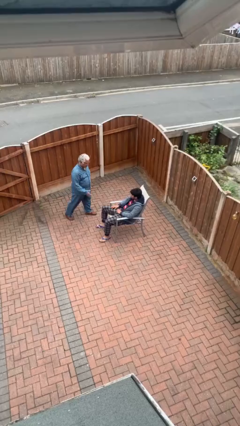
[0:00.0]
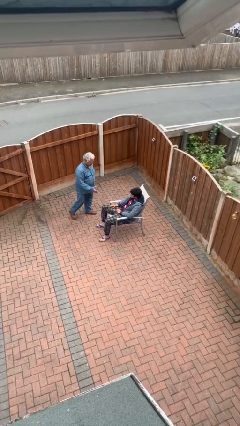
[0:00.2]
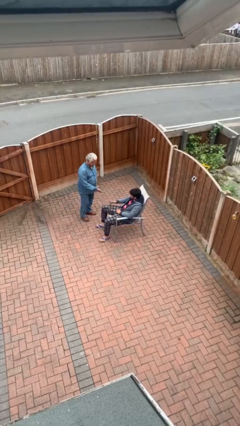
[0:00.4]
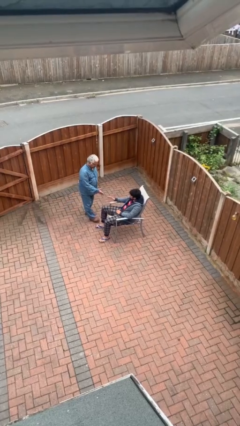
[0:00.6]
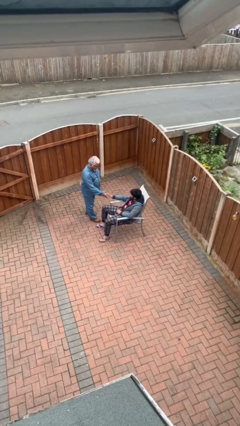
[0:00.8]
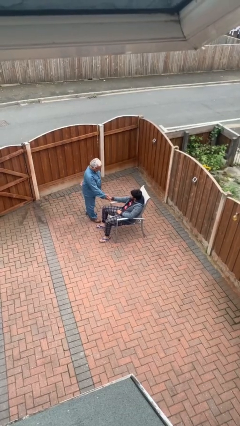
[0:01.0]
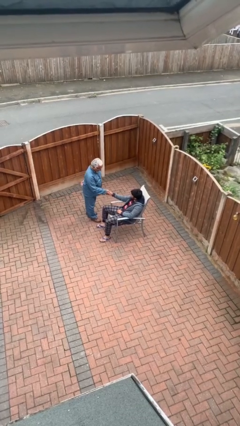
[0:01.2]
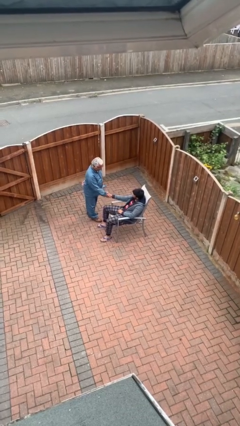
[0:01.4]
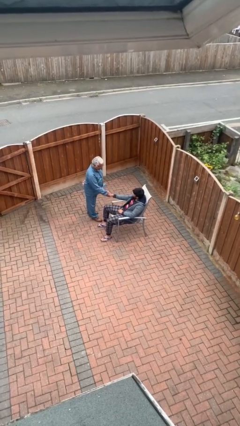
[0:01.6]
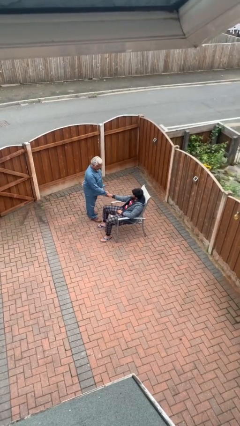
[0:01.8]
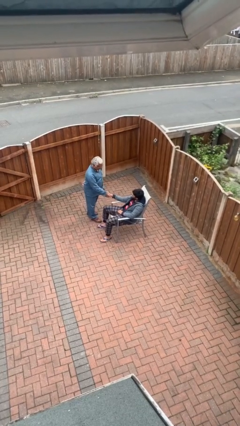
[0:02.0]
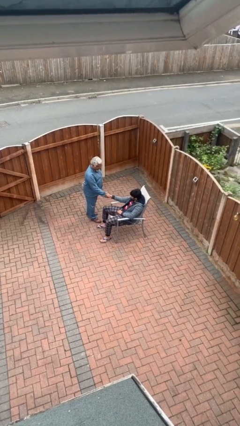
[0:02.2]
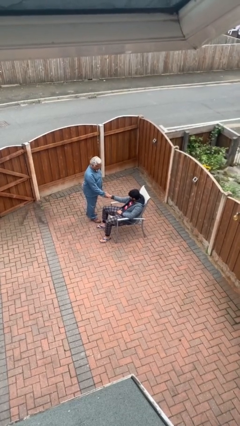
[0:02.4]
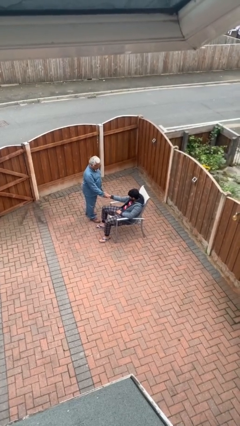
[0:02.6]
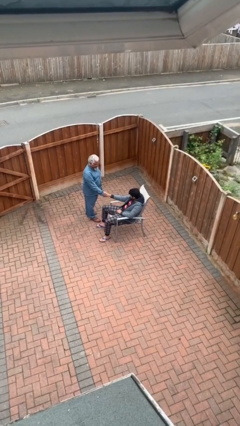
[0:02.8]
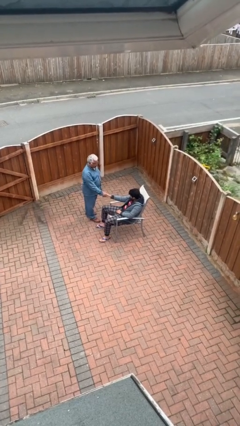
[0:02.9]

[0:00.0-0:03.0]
person shakes hand

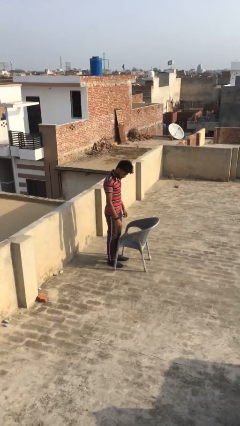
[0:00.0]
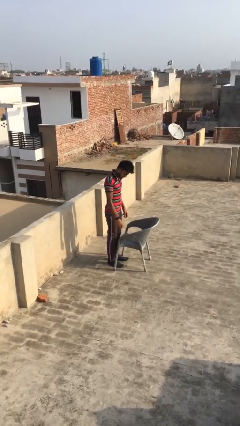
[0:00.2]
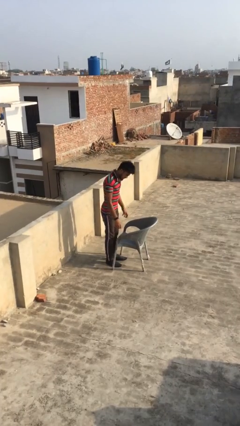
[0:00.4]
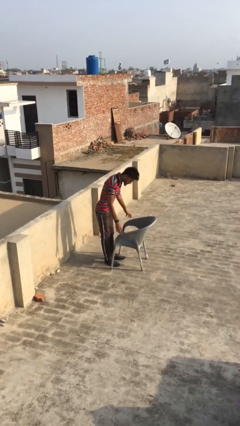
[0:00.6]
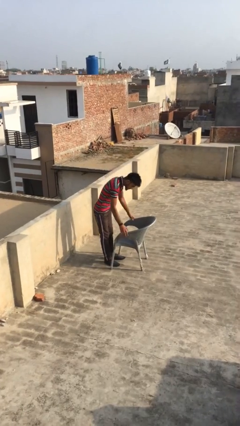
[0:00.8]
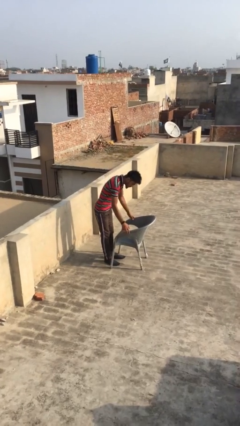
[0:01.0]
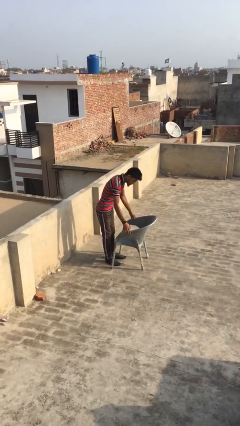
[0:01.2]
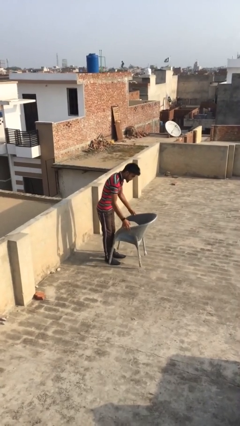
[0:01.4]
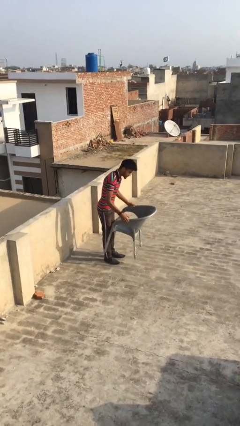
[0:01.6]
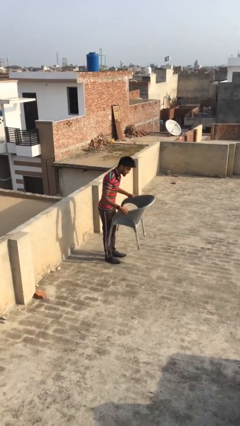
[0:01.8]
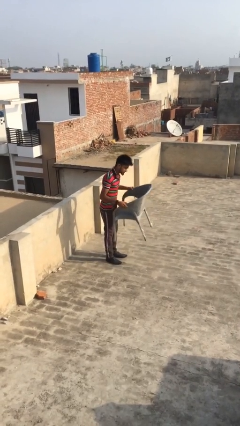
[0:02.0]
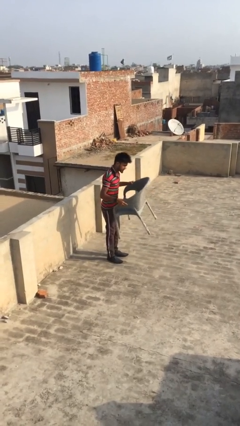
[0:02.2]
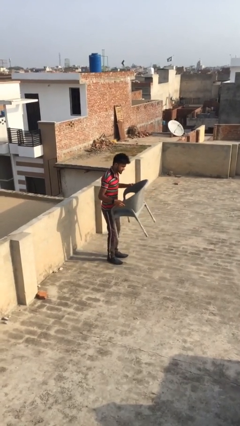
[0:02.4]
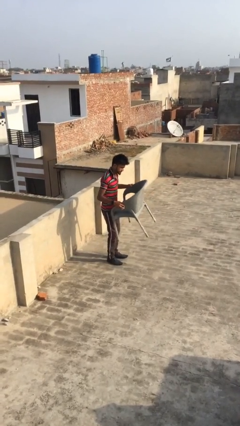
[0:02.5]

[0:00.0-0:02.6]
person picks up object from floor

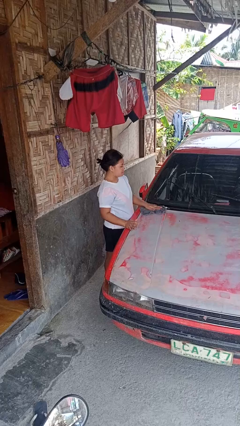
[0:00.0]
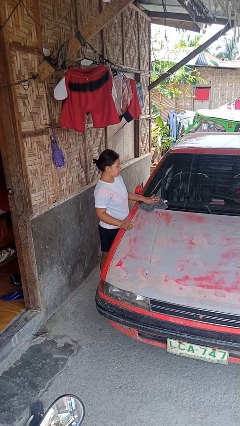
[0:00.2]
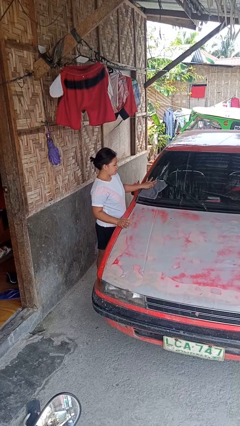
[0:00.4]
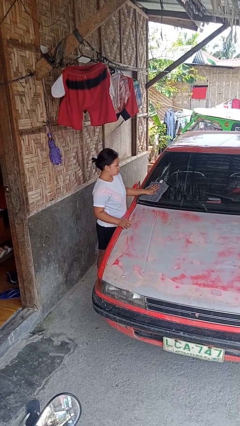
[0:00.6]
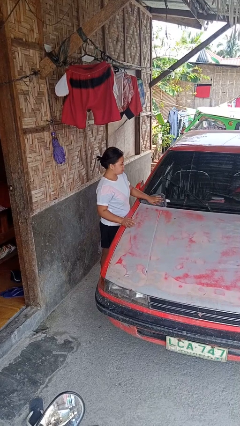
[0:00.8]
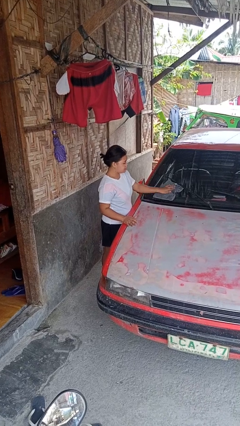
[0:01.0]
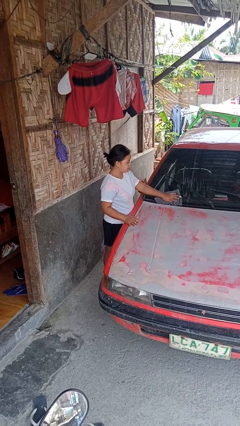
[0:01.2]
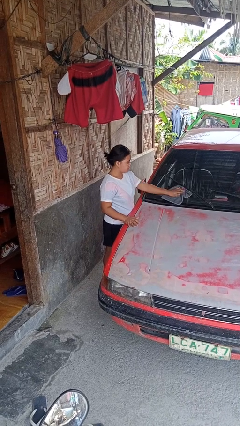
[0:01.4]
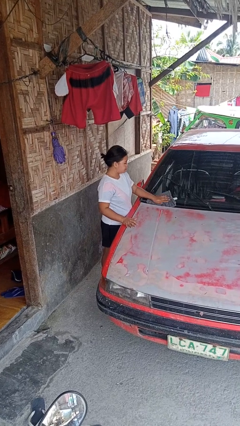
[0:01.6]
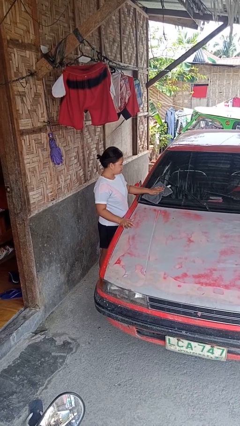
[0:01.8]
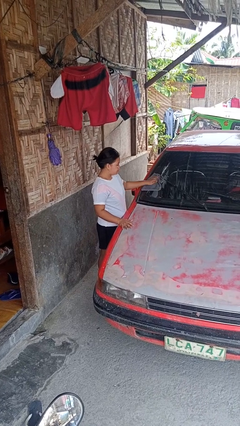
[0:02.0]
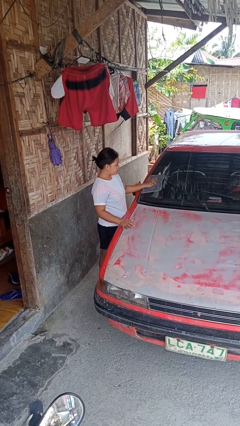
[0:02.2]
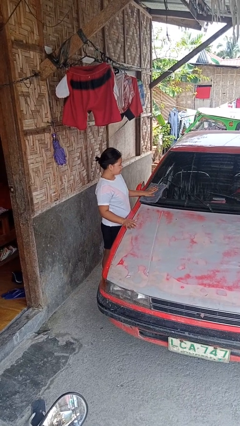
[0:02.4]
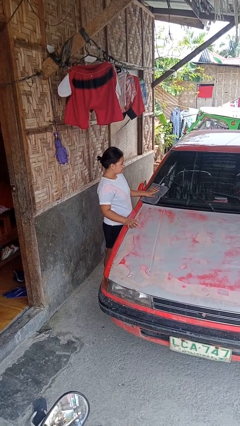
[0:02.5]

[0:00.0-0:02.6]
person polishes car with rag

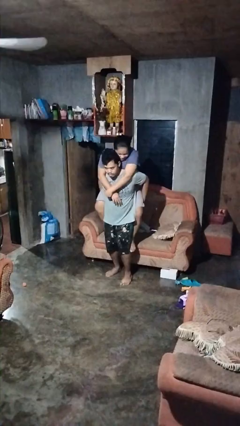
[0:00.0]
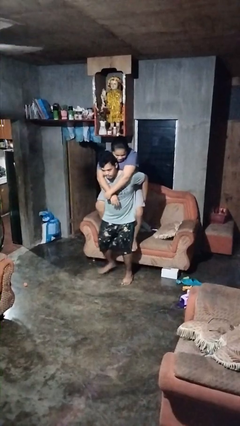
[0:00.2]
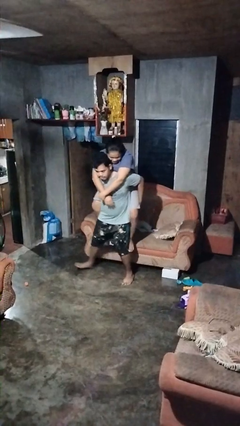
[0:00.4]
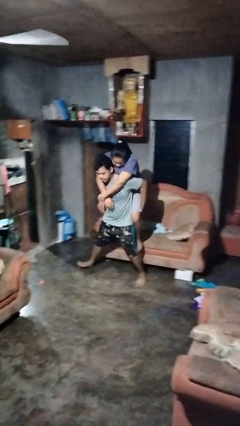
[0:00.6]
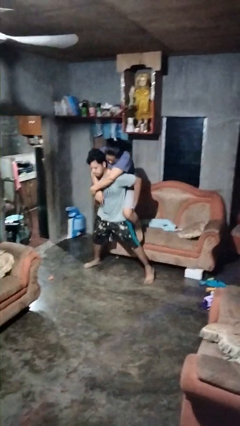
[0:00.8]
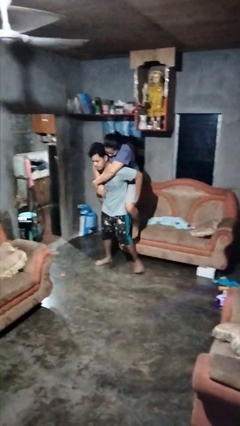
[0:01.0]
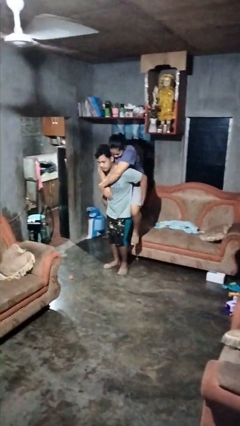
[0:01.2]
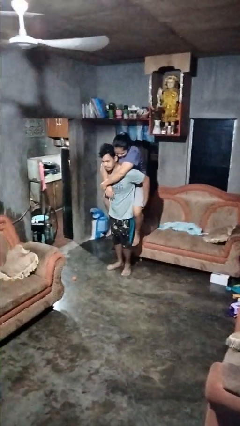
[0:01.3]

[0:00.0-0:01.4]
person carries person on back

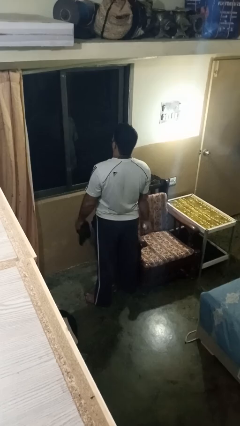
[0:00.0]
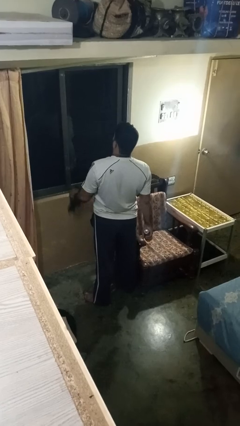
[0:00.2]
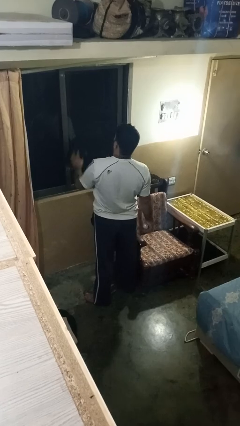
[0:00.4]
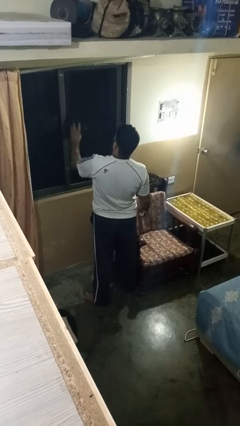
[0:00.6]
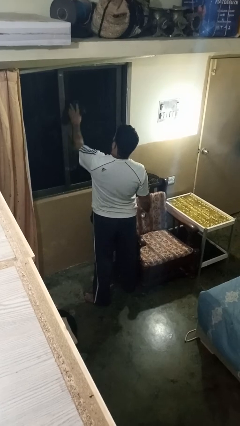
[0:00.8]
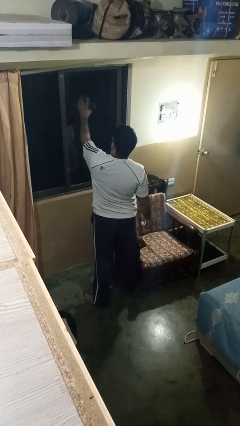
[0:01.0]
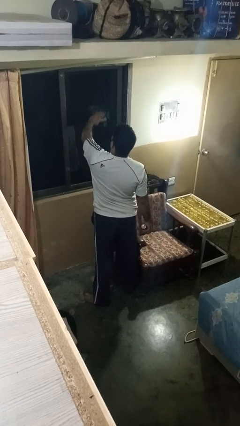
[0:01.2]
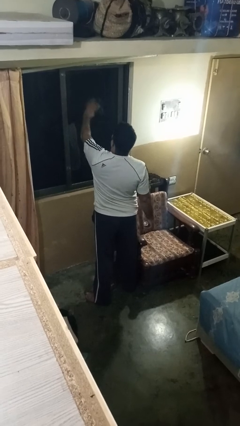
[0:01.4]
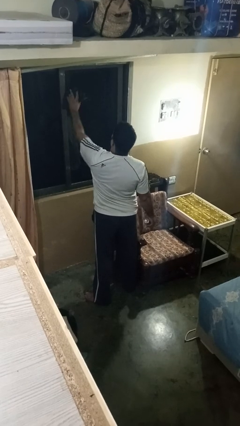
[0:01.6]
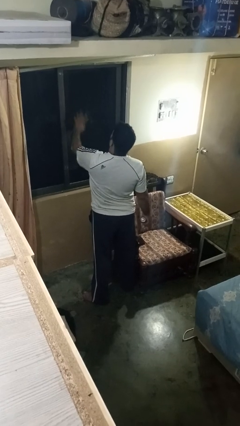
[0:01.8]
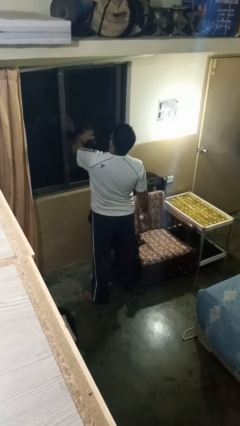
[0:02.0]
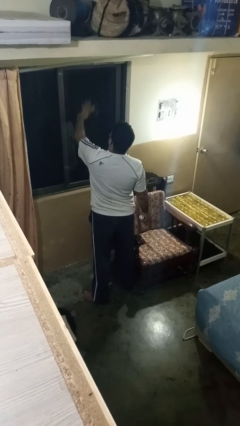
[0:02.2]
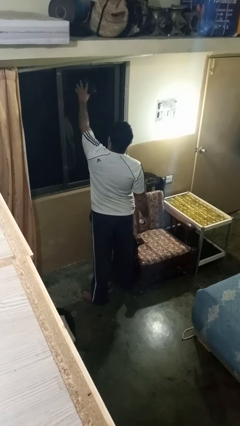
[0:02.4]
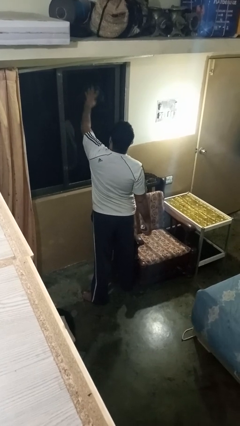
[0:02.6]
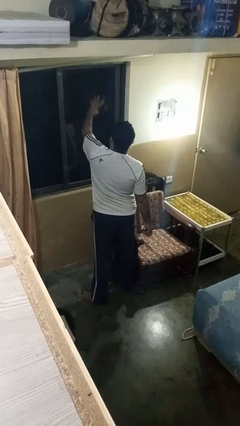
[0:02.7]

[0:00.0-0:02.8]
person washes window

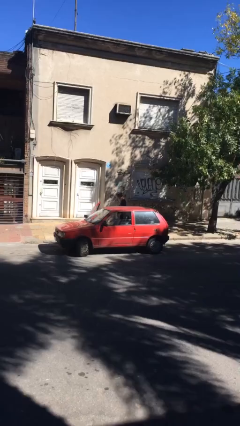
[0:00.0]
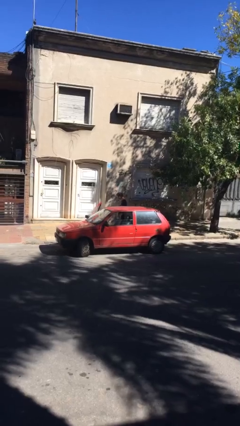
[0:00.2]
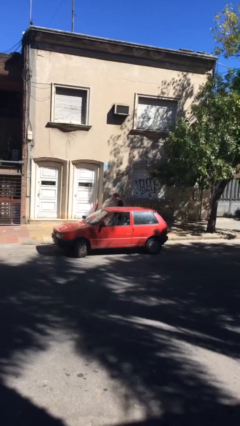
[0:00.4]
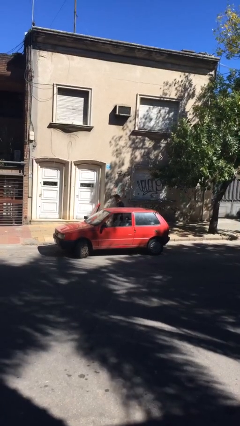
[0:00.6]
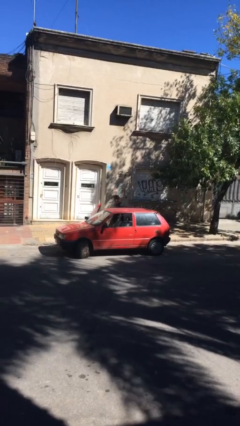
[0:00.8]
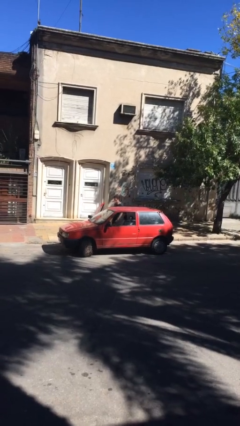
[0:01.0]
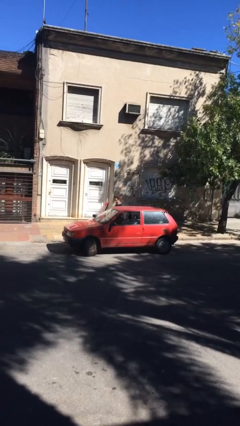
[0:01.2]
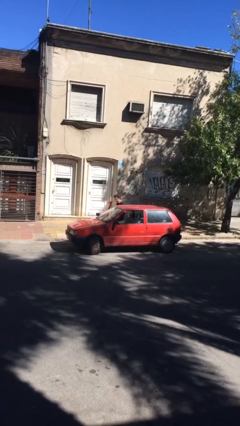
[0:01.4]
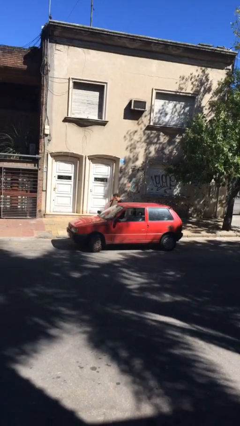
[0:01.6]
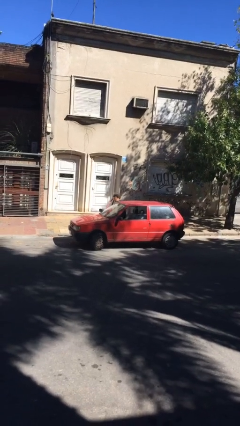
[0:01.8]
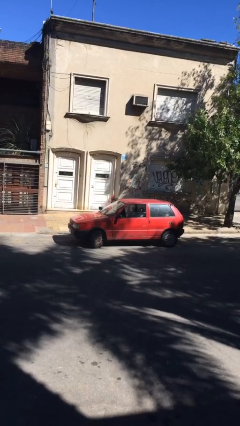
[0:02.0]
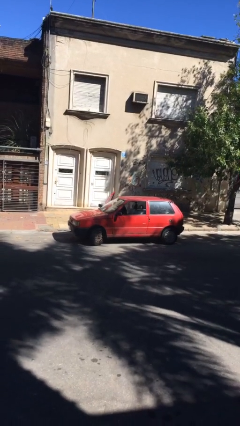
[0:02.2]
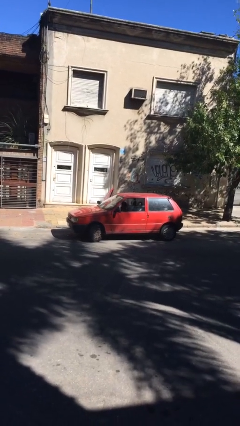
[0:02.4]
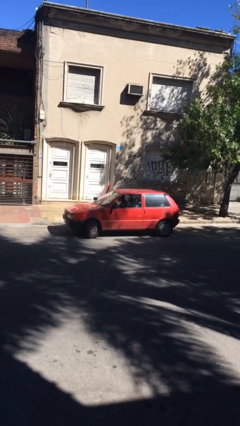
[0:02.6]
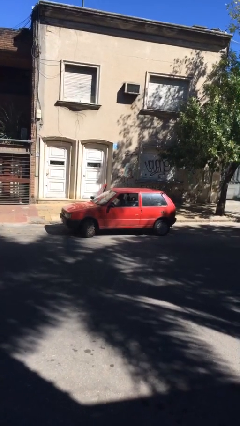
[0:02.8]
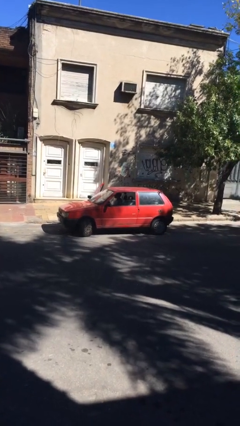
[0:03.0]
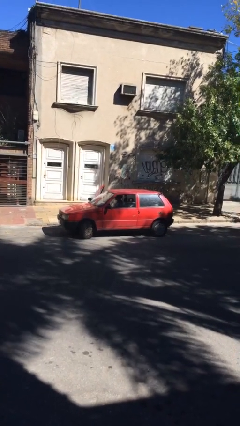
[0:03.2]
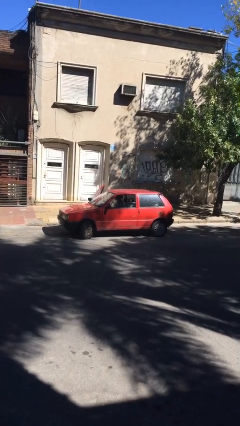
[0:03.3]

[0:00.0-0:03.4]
person enters car

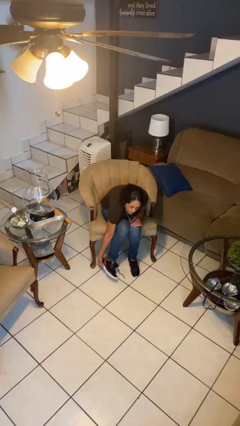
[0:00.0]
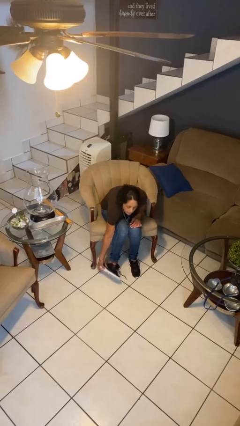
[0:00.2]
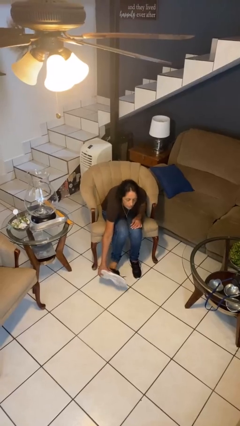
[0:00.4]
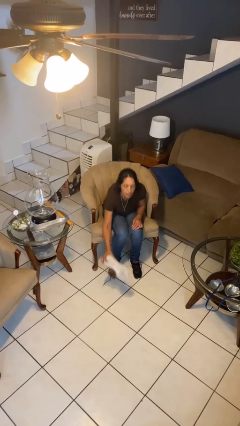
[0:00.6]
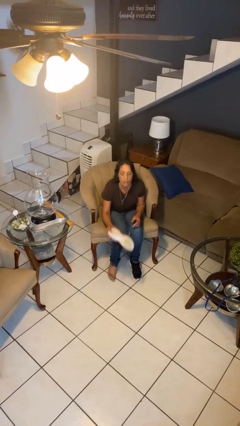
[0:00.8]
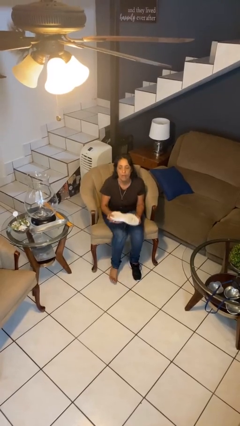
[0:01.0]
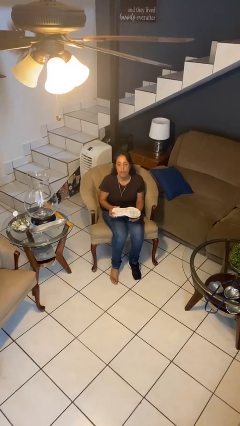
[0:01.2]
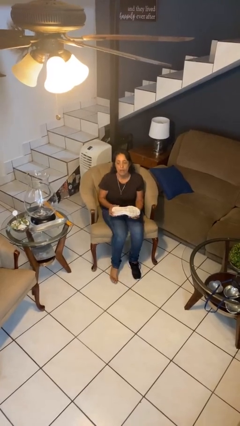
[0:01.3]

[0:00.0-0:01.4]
person takes off shoes
